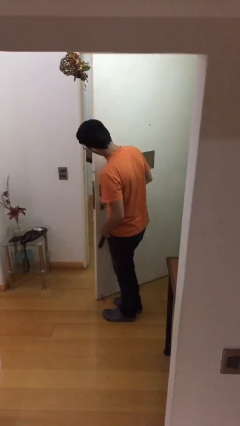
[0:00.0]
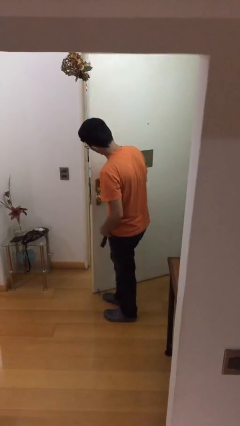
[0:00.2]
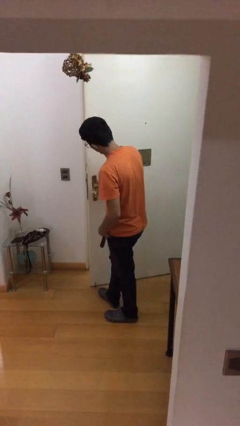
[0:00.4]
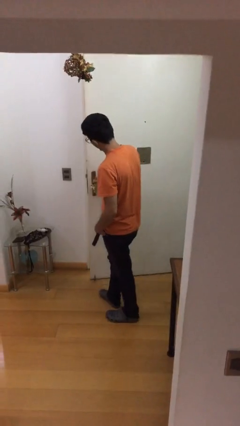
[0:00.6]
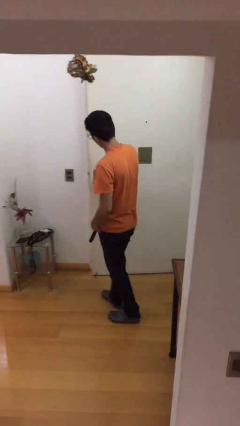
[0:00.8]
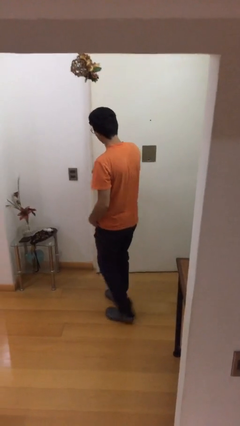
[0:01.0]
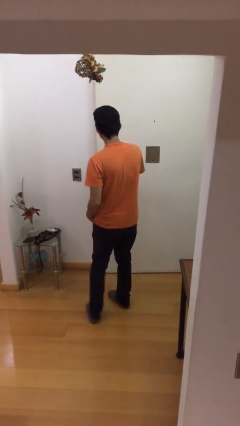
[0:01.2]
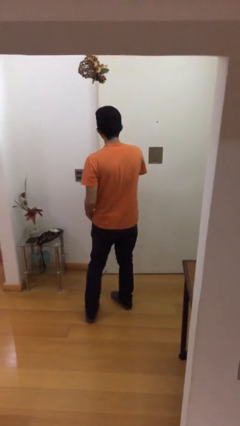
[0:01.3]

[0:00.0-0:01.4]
person closes facility door

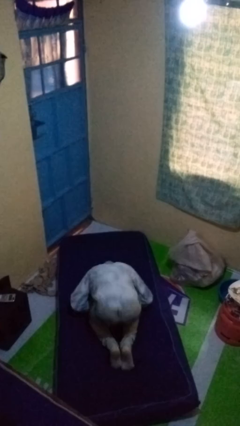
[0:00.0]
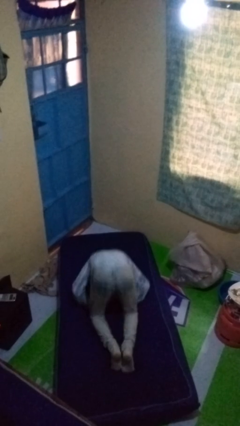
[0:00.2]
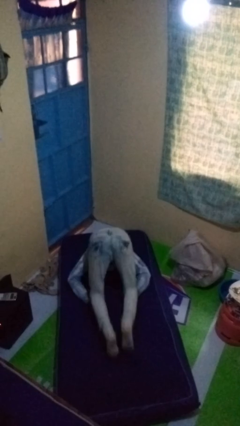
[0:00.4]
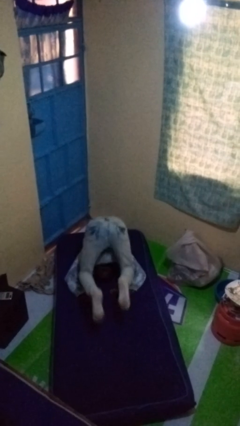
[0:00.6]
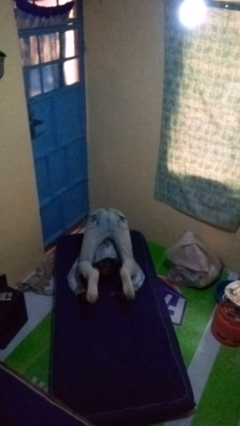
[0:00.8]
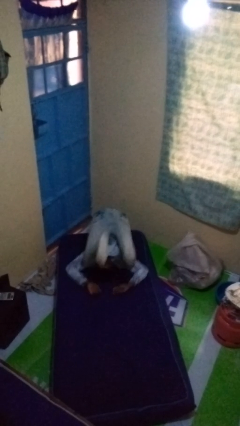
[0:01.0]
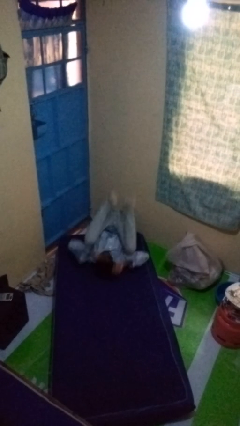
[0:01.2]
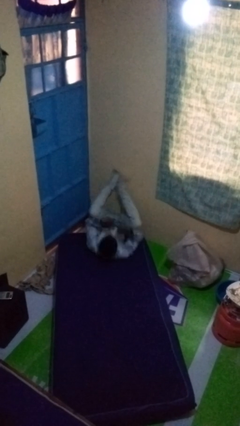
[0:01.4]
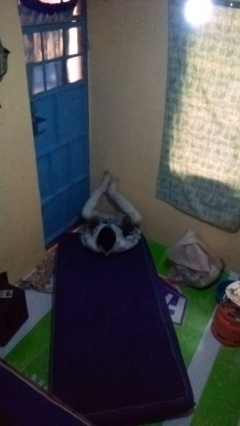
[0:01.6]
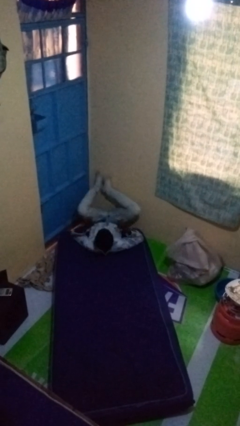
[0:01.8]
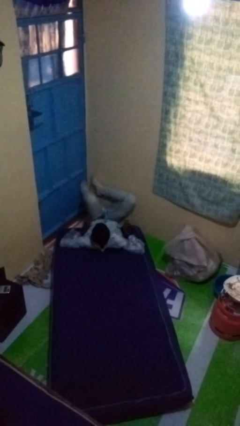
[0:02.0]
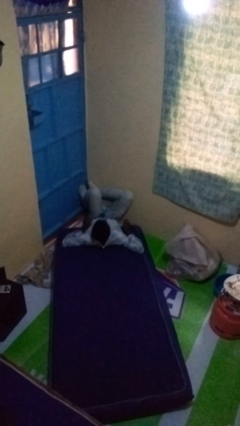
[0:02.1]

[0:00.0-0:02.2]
person somersaults

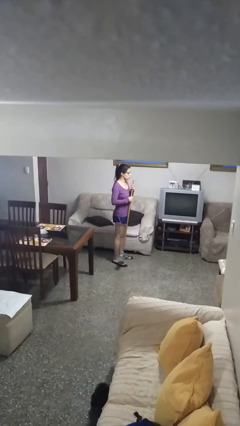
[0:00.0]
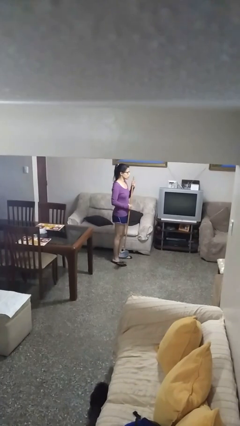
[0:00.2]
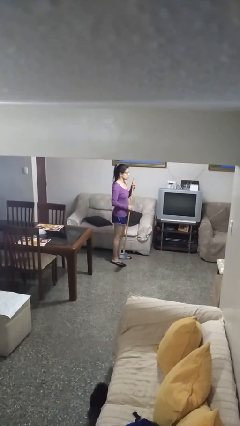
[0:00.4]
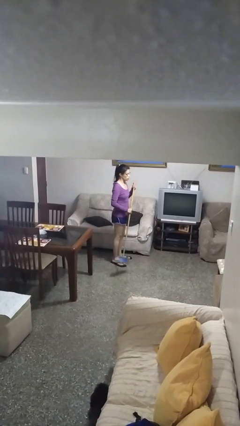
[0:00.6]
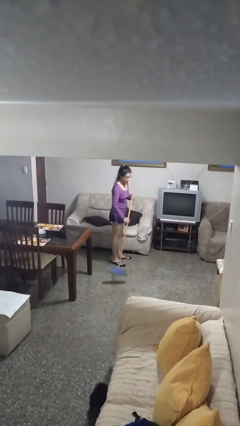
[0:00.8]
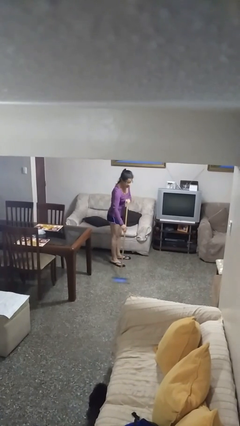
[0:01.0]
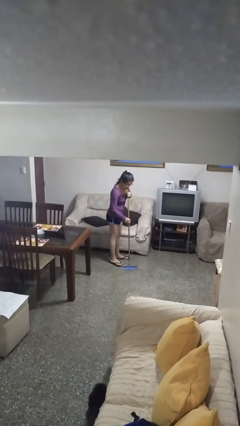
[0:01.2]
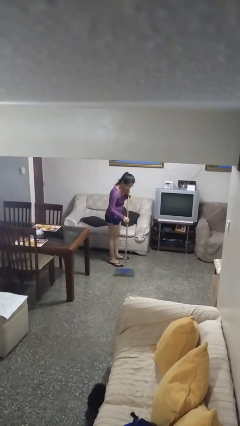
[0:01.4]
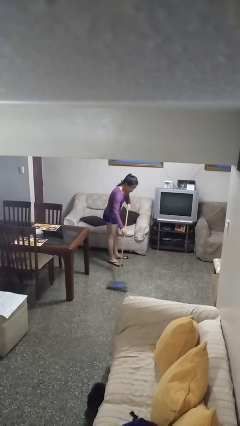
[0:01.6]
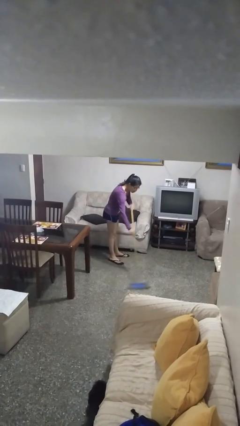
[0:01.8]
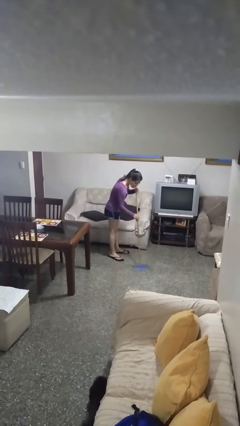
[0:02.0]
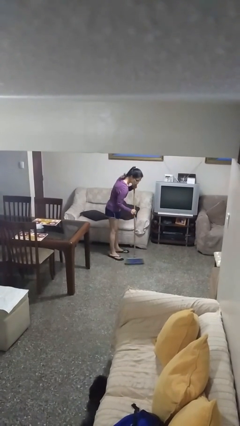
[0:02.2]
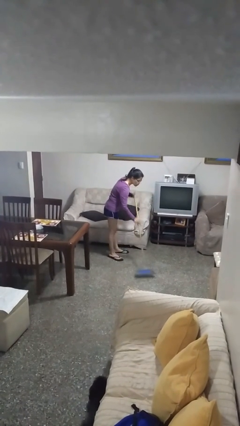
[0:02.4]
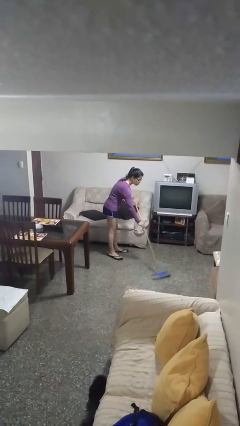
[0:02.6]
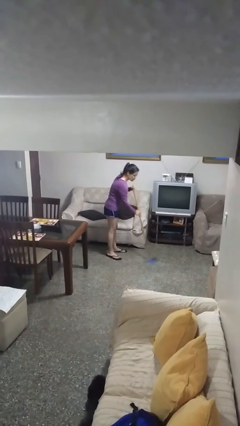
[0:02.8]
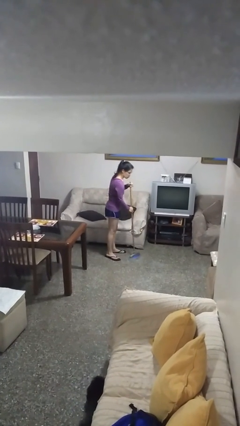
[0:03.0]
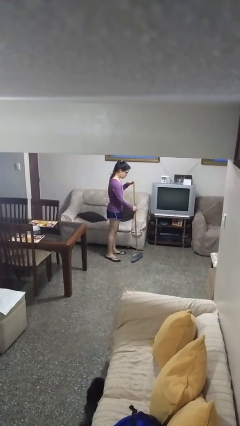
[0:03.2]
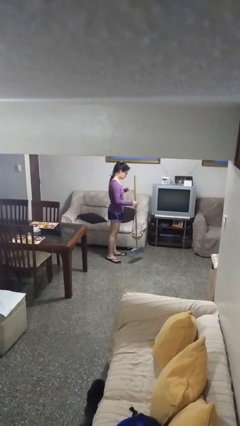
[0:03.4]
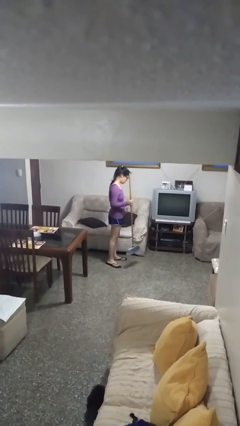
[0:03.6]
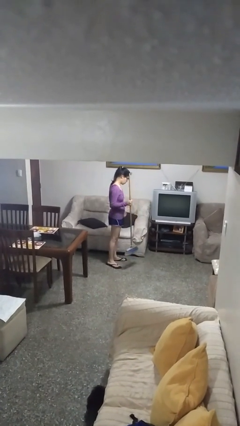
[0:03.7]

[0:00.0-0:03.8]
person sweeps floor

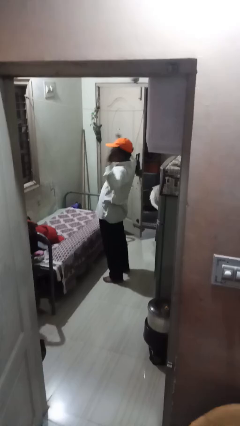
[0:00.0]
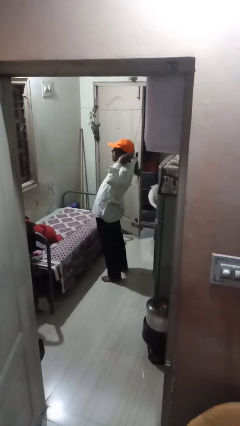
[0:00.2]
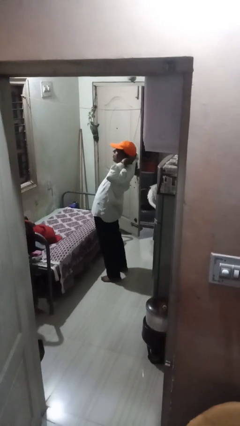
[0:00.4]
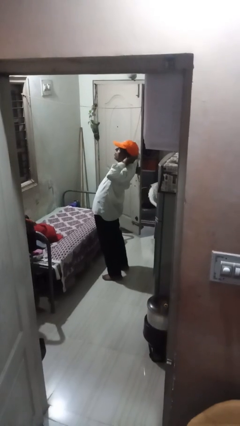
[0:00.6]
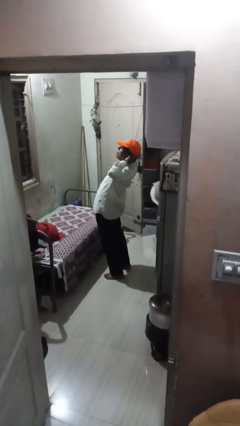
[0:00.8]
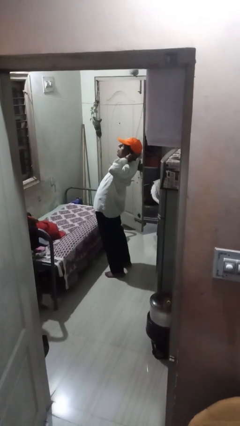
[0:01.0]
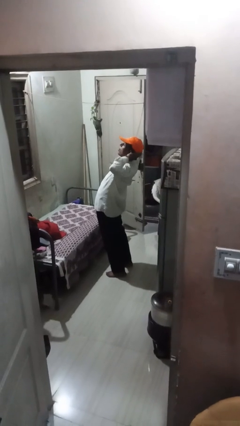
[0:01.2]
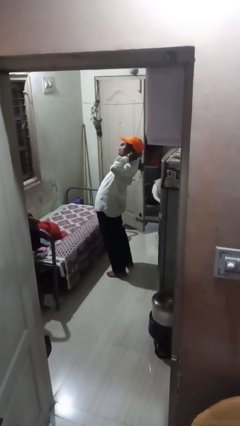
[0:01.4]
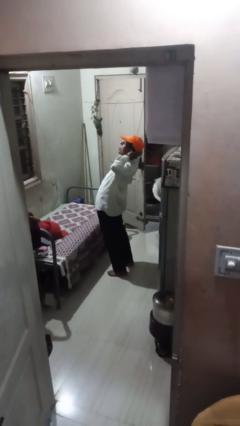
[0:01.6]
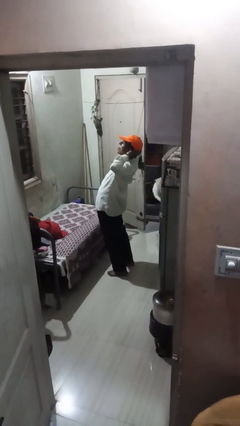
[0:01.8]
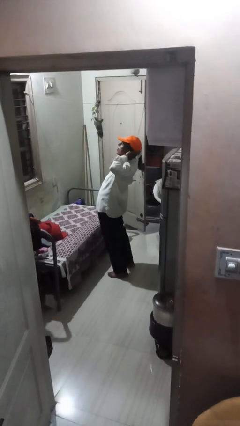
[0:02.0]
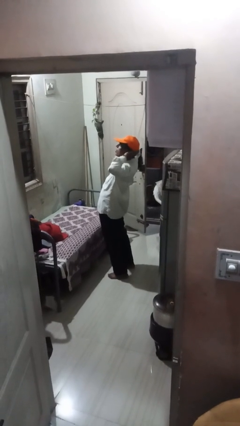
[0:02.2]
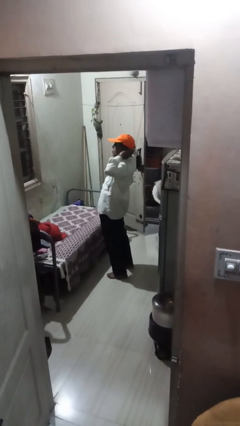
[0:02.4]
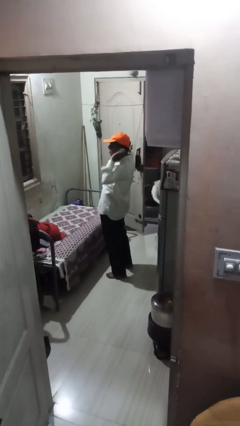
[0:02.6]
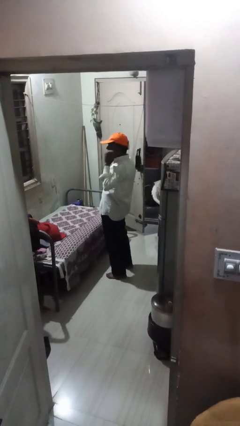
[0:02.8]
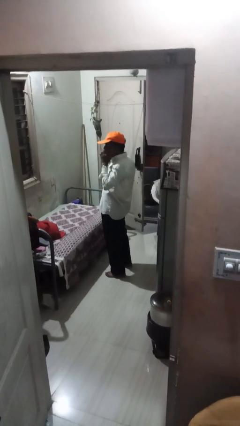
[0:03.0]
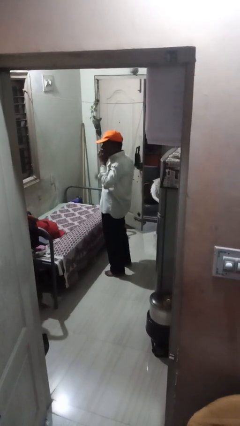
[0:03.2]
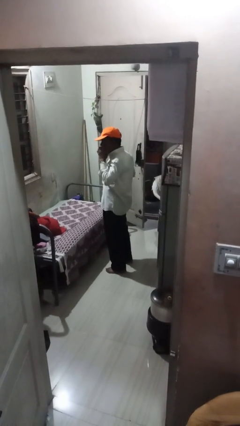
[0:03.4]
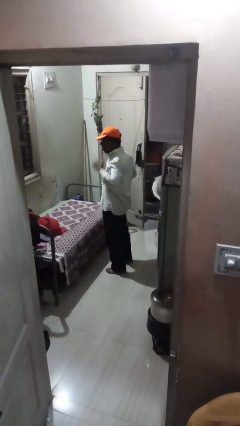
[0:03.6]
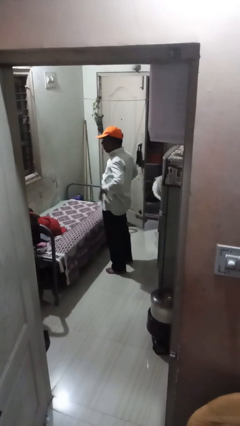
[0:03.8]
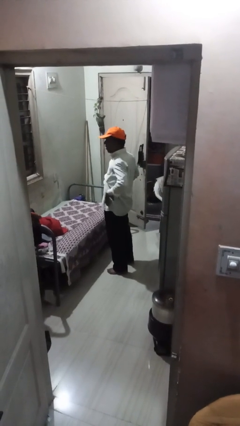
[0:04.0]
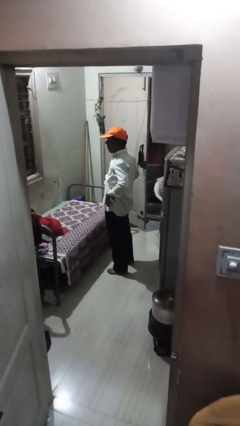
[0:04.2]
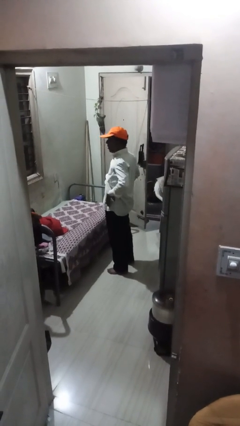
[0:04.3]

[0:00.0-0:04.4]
person stretches arms over head

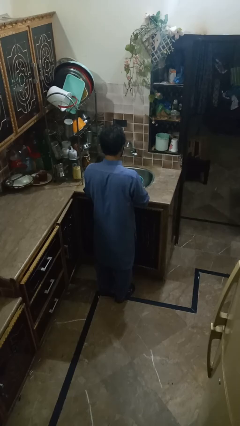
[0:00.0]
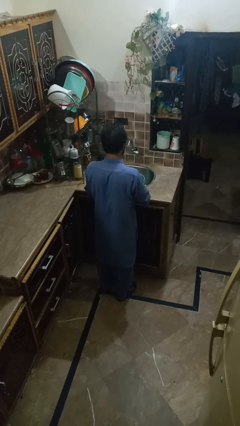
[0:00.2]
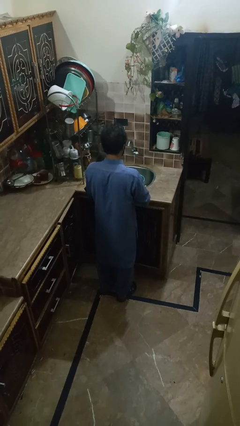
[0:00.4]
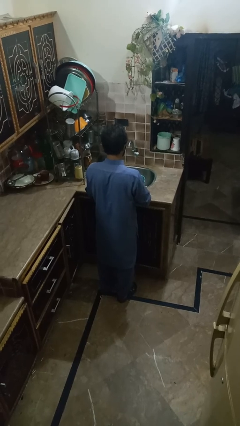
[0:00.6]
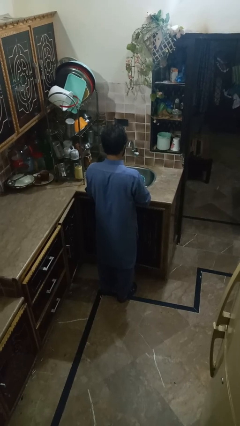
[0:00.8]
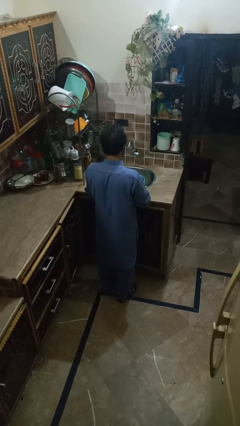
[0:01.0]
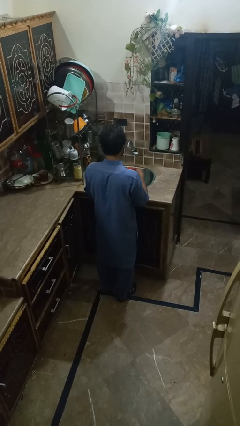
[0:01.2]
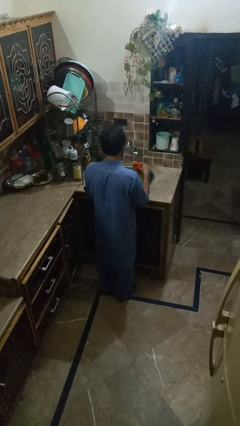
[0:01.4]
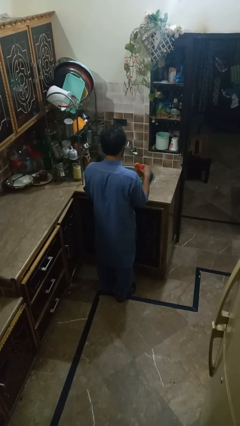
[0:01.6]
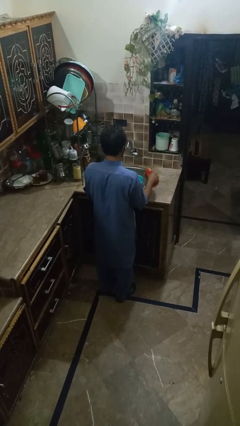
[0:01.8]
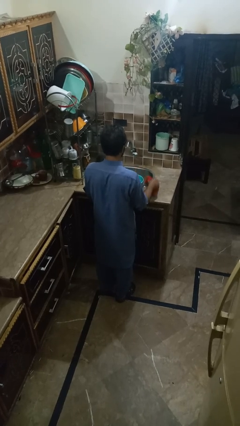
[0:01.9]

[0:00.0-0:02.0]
person pours into bowl

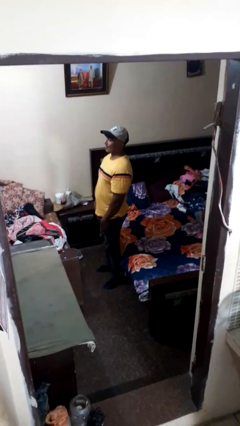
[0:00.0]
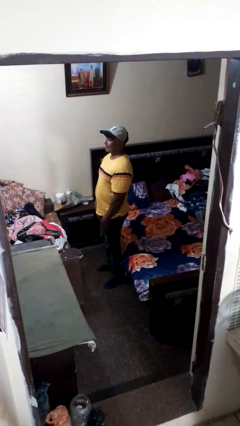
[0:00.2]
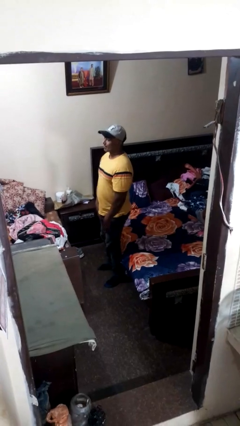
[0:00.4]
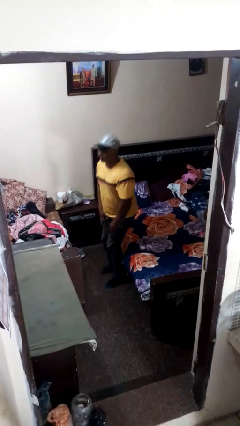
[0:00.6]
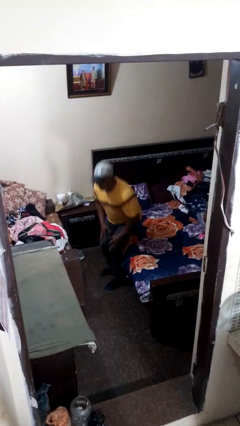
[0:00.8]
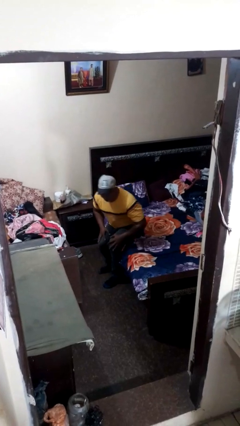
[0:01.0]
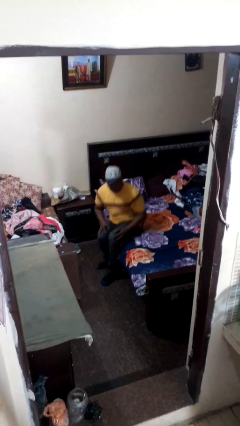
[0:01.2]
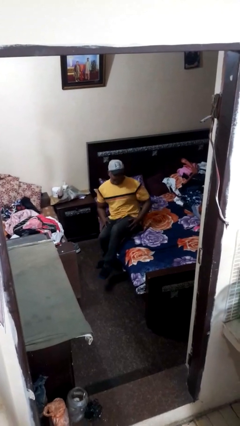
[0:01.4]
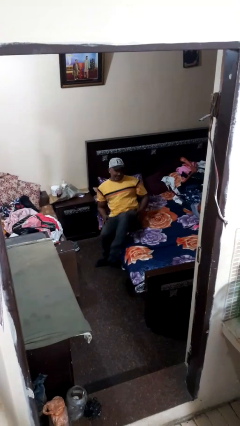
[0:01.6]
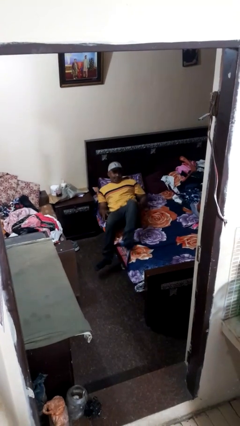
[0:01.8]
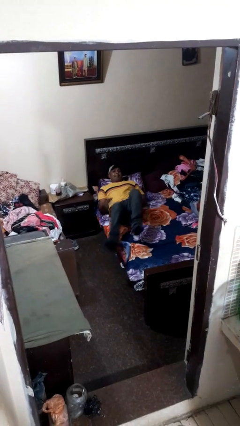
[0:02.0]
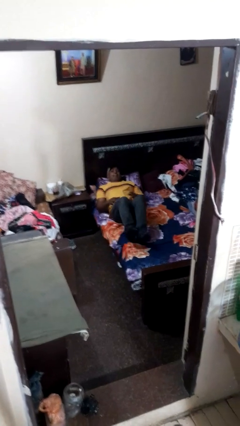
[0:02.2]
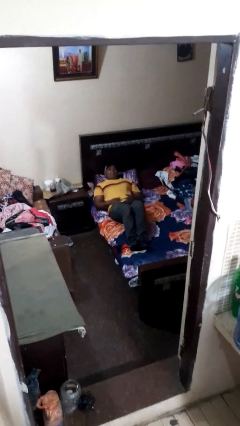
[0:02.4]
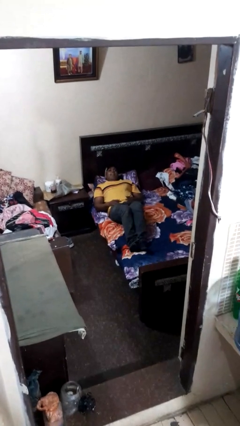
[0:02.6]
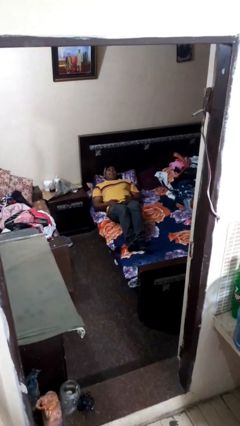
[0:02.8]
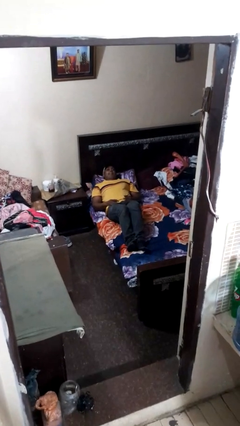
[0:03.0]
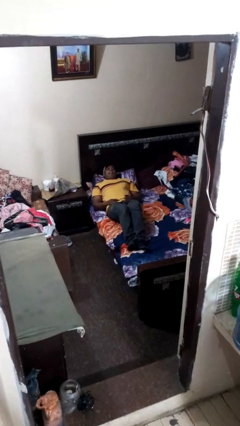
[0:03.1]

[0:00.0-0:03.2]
person lies down on bed

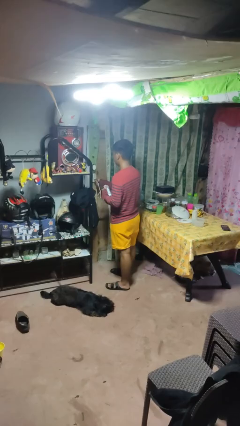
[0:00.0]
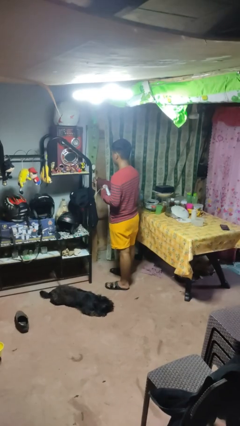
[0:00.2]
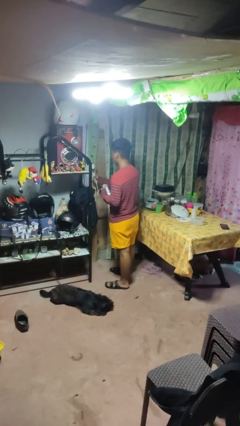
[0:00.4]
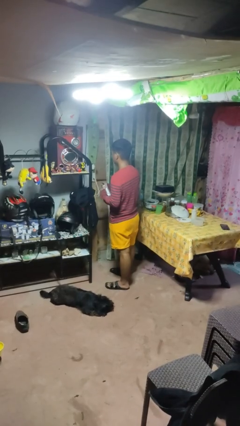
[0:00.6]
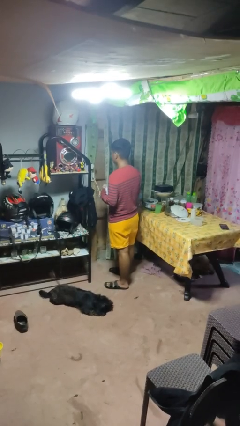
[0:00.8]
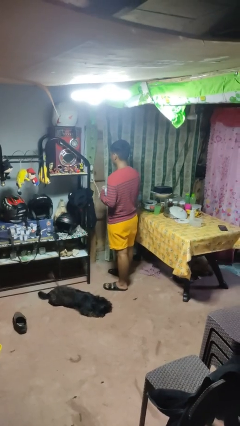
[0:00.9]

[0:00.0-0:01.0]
person plugs into electrical socket
